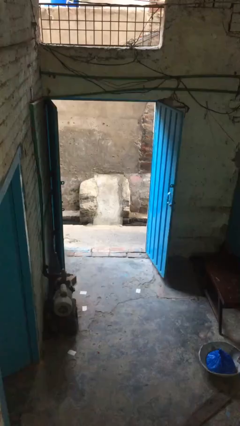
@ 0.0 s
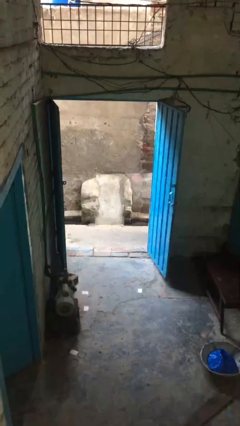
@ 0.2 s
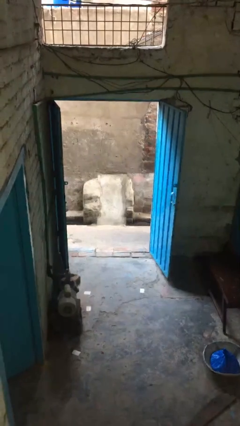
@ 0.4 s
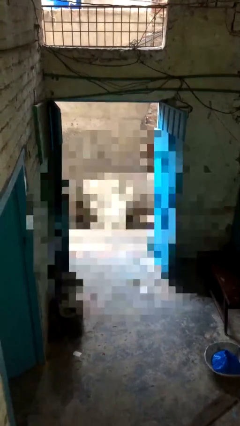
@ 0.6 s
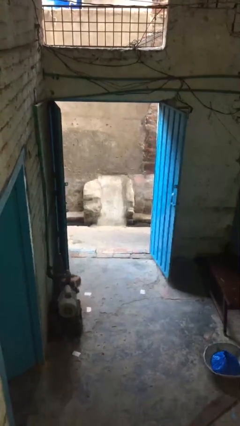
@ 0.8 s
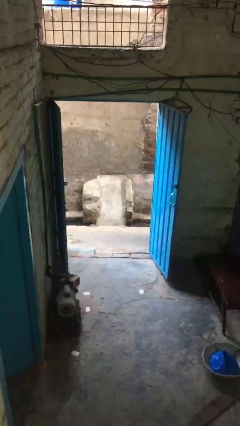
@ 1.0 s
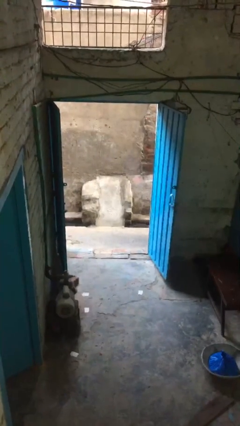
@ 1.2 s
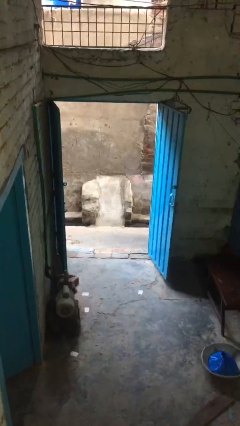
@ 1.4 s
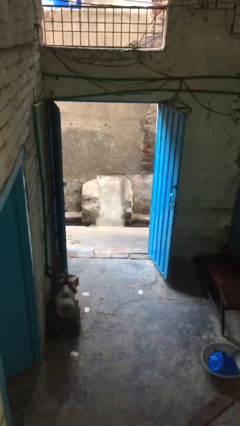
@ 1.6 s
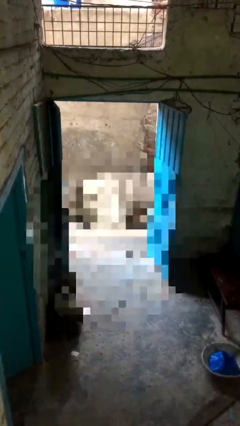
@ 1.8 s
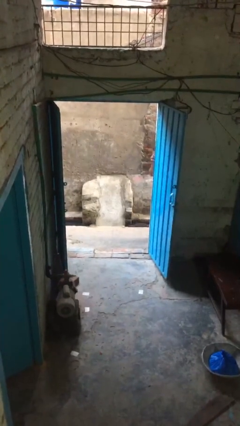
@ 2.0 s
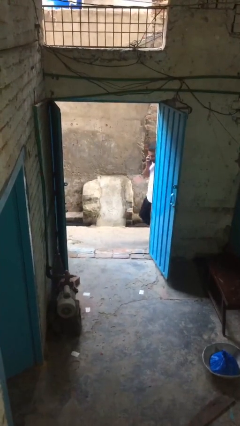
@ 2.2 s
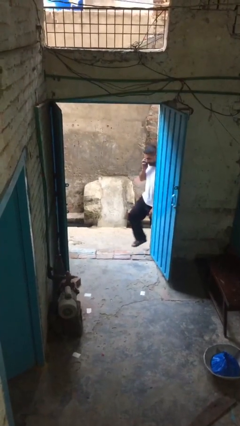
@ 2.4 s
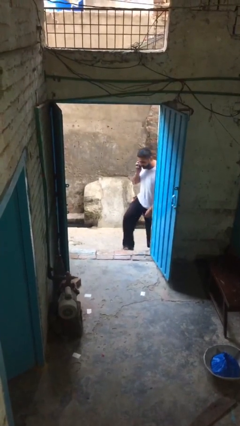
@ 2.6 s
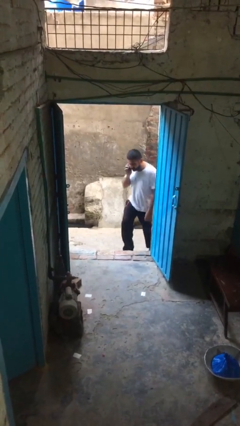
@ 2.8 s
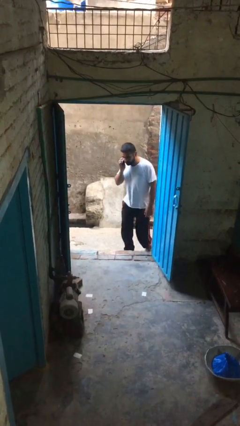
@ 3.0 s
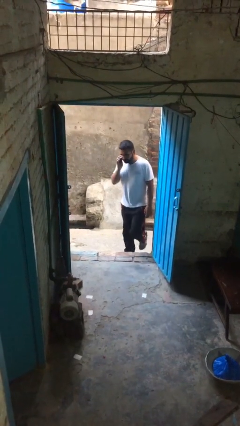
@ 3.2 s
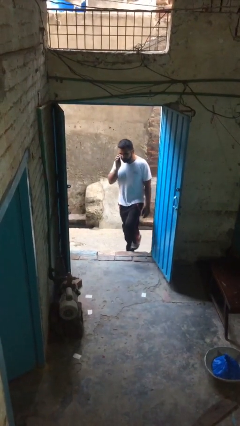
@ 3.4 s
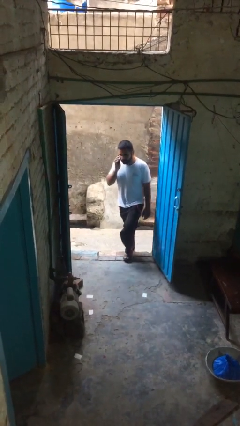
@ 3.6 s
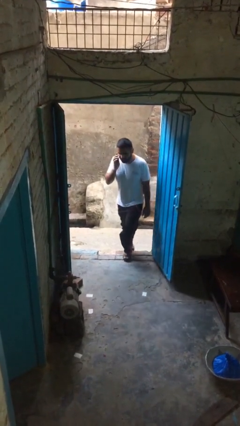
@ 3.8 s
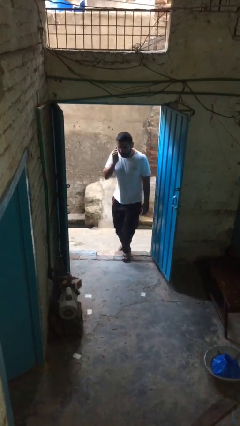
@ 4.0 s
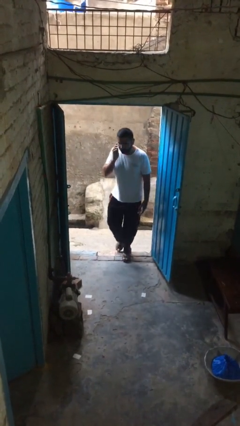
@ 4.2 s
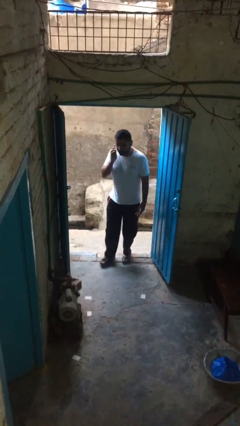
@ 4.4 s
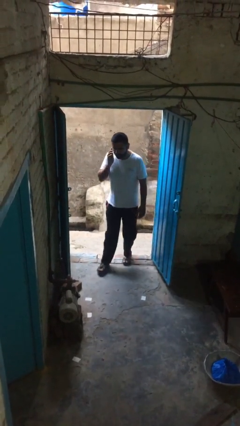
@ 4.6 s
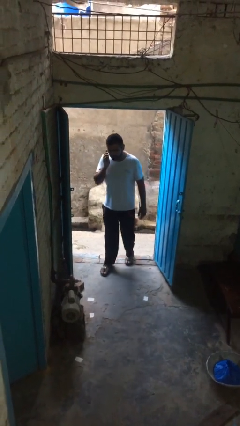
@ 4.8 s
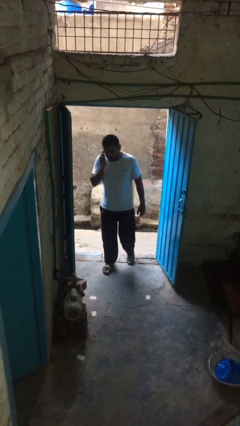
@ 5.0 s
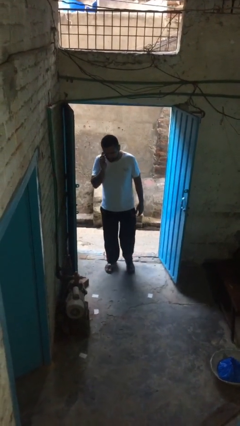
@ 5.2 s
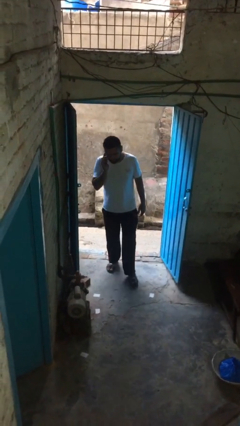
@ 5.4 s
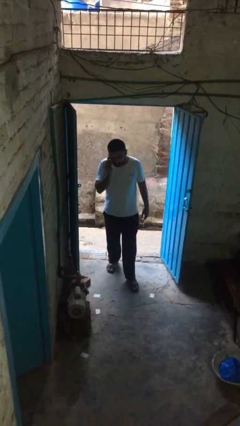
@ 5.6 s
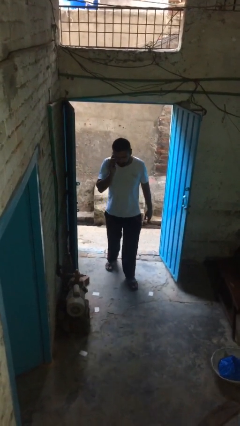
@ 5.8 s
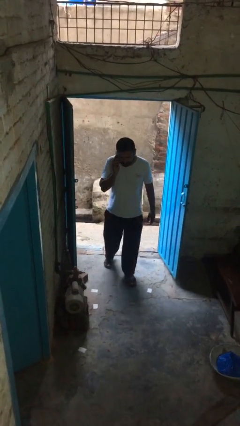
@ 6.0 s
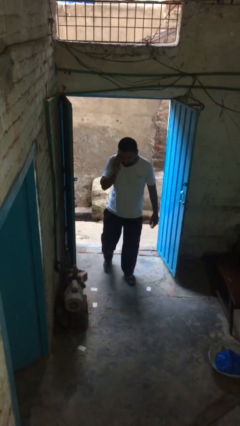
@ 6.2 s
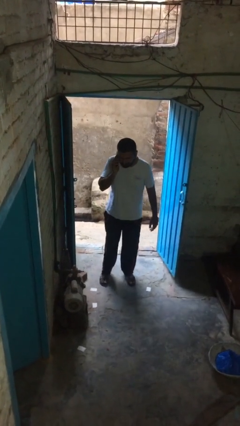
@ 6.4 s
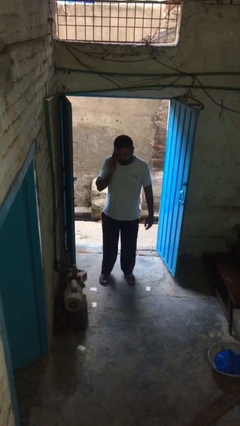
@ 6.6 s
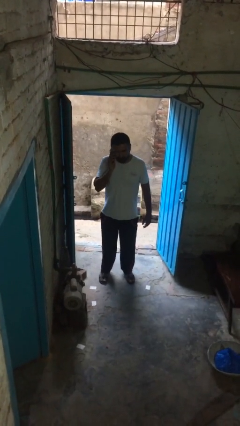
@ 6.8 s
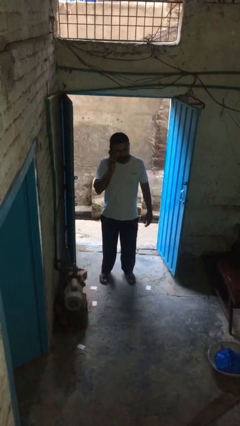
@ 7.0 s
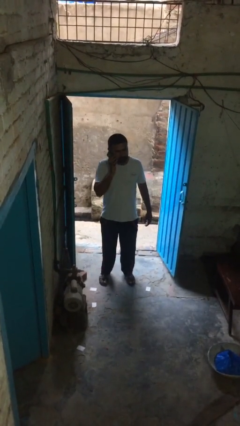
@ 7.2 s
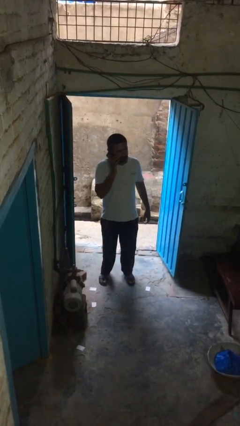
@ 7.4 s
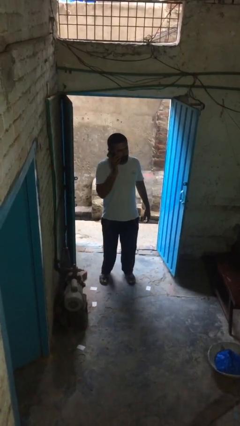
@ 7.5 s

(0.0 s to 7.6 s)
person enters scene through structure

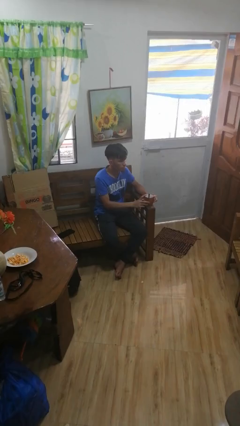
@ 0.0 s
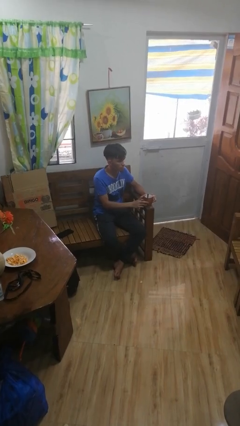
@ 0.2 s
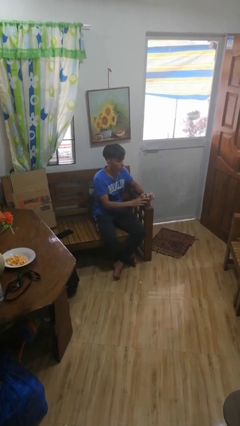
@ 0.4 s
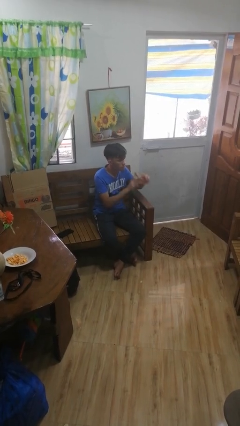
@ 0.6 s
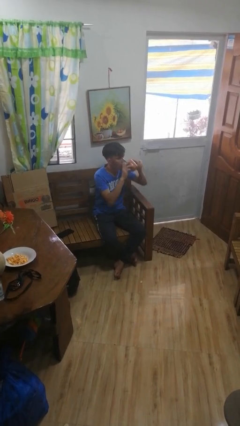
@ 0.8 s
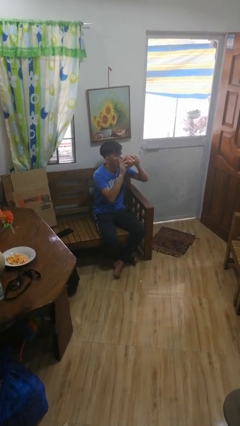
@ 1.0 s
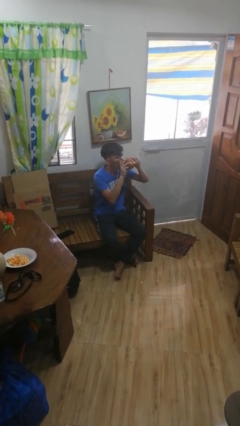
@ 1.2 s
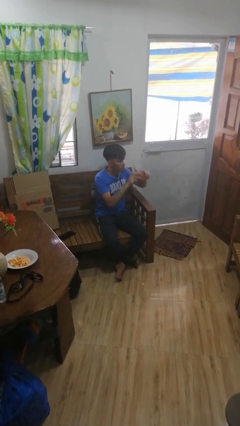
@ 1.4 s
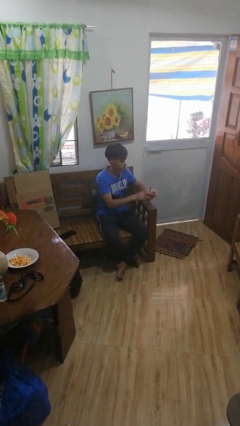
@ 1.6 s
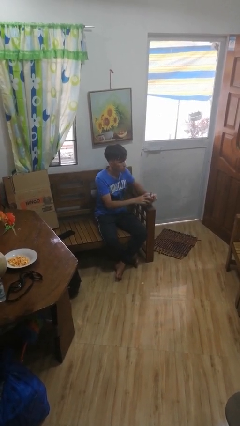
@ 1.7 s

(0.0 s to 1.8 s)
person drinks from mug

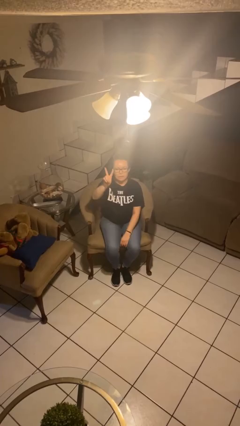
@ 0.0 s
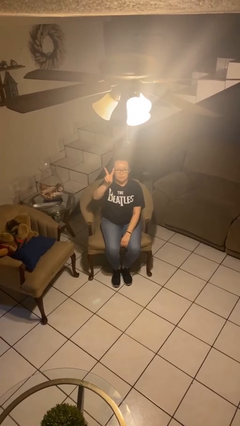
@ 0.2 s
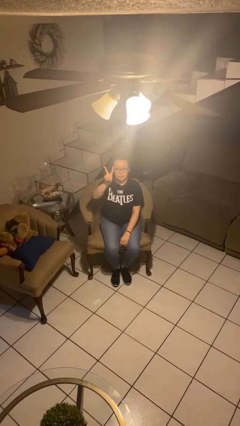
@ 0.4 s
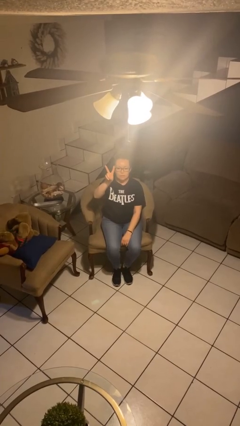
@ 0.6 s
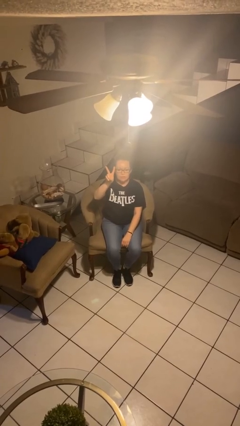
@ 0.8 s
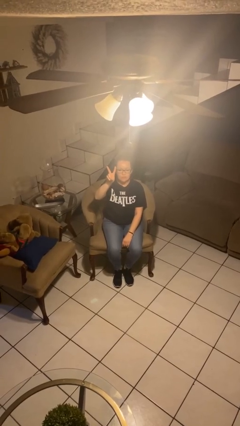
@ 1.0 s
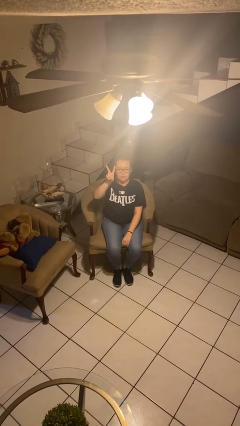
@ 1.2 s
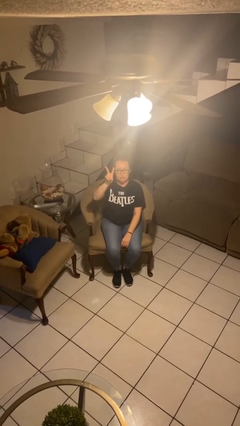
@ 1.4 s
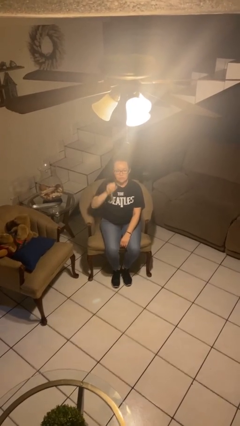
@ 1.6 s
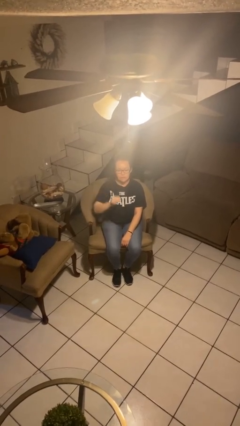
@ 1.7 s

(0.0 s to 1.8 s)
person gestures peace

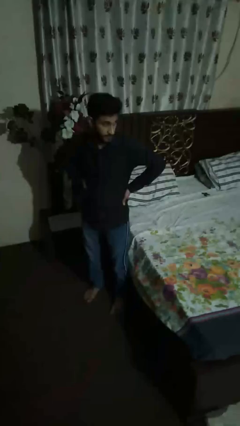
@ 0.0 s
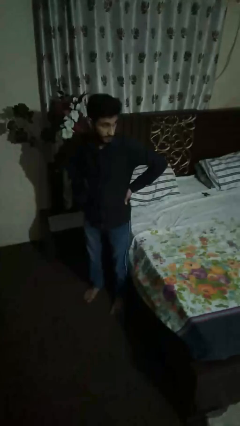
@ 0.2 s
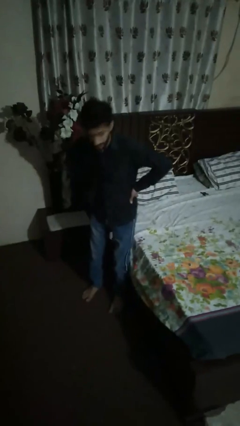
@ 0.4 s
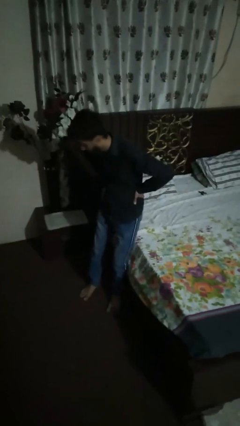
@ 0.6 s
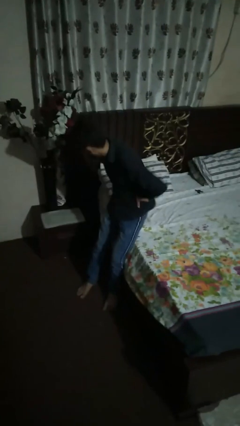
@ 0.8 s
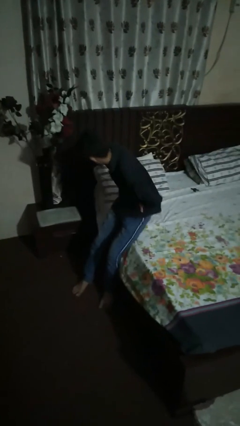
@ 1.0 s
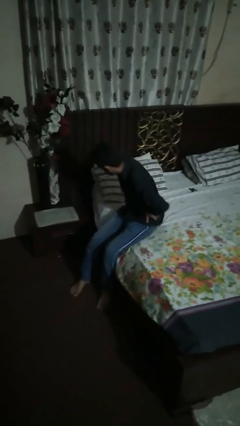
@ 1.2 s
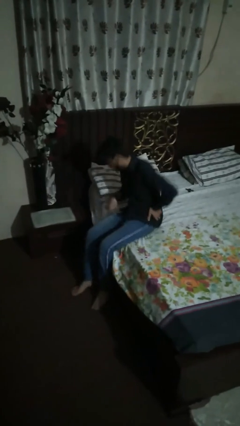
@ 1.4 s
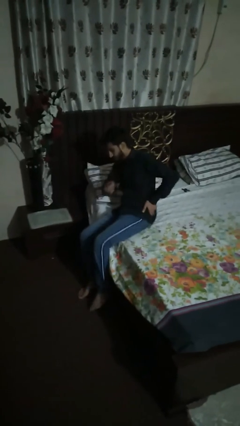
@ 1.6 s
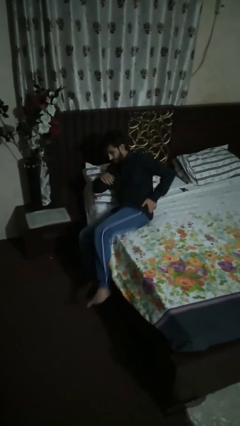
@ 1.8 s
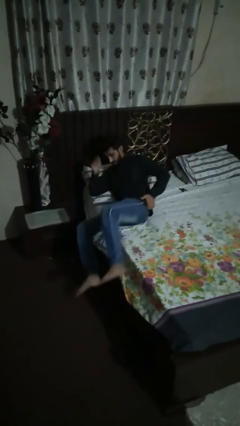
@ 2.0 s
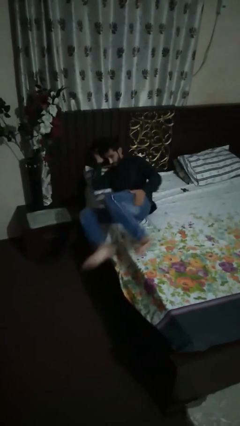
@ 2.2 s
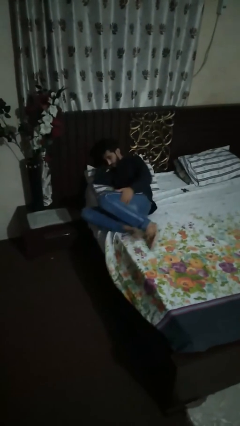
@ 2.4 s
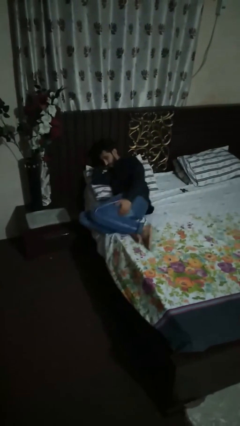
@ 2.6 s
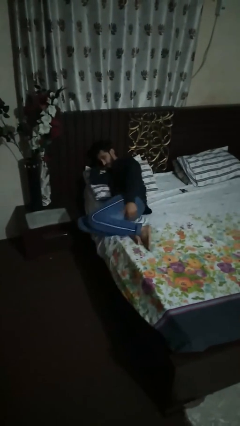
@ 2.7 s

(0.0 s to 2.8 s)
person lies down on bed

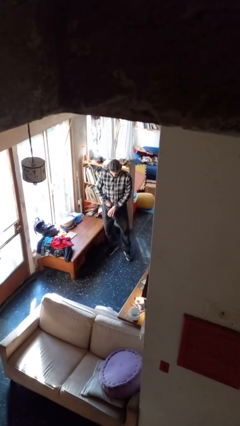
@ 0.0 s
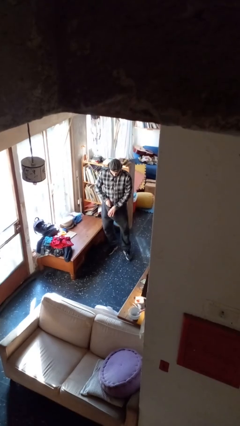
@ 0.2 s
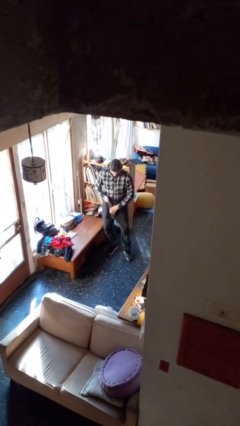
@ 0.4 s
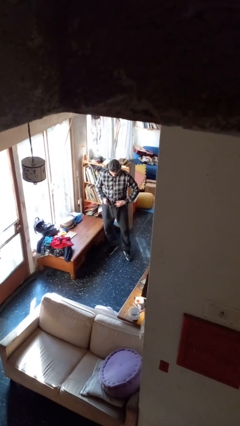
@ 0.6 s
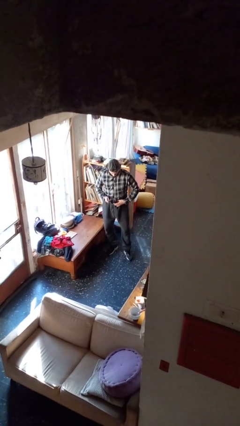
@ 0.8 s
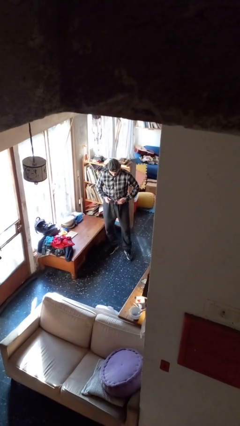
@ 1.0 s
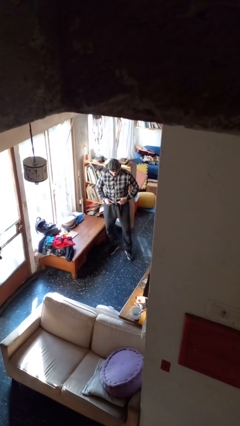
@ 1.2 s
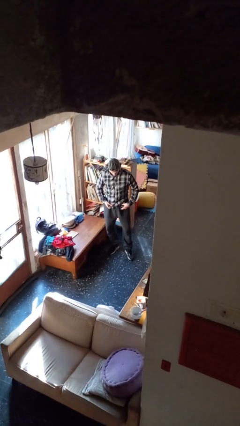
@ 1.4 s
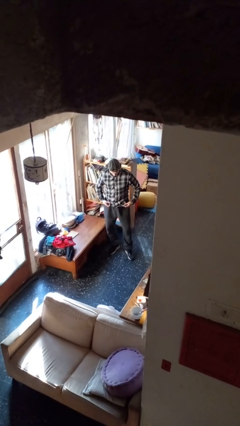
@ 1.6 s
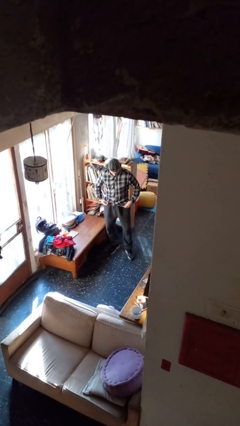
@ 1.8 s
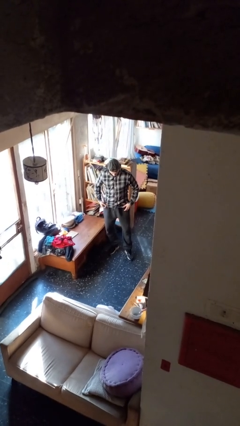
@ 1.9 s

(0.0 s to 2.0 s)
person untucks shirt

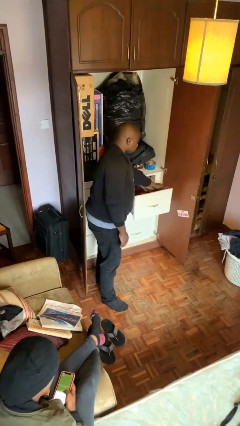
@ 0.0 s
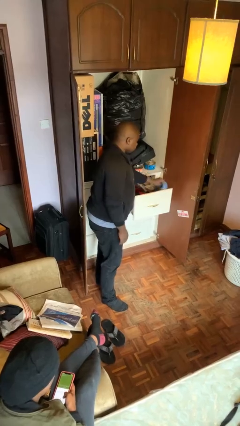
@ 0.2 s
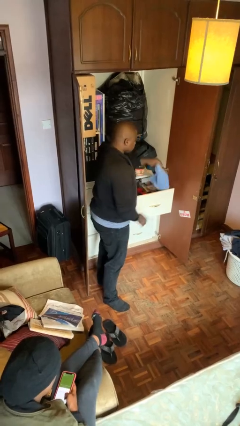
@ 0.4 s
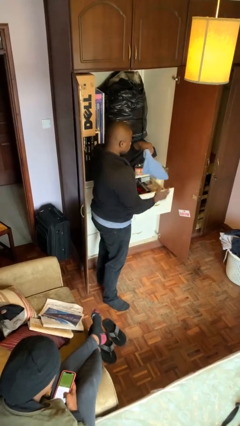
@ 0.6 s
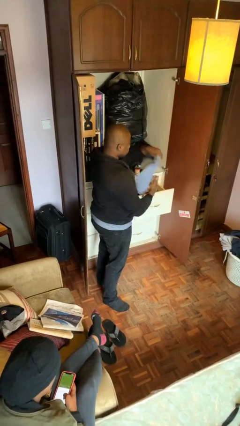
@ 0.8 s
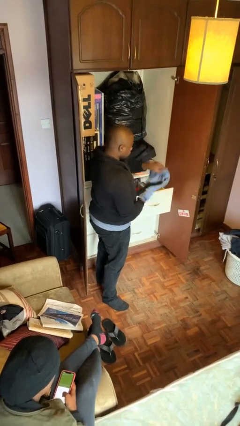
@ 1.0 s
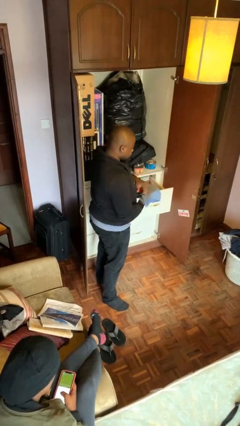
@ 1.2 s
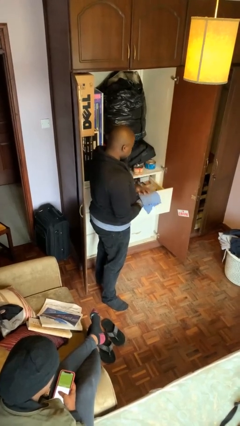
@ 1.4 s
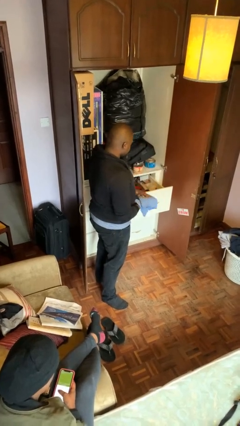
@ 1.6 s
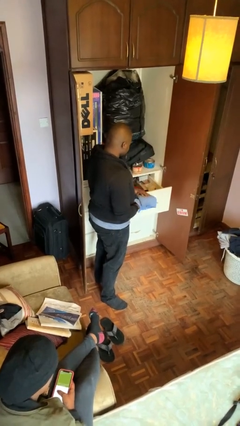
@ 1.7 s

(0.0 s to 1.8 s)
person takes clothes from dresser
